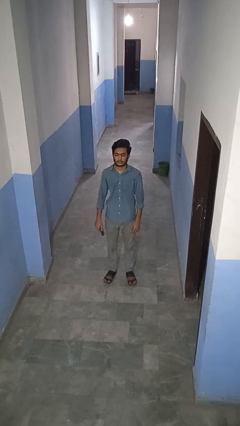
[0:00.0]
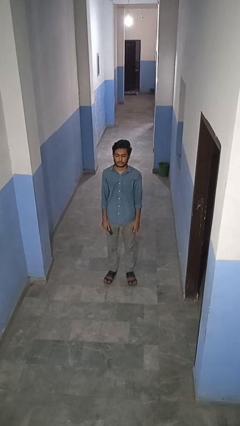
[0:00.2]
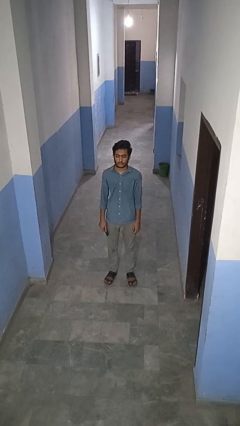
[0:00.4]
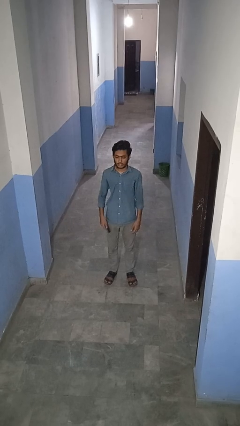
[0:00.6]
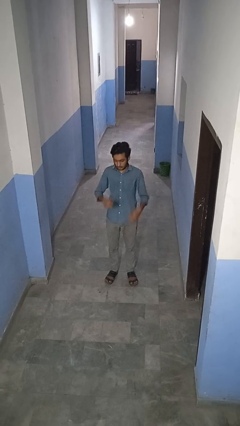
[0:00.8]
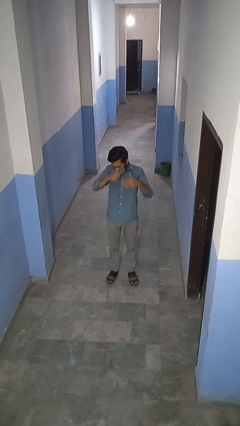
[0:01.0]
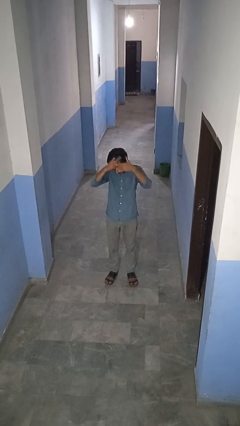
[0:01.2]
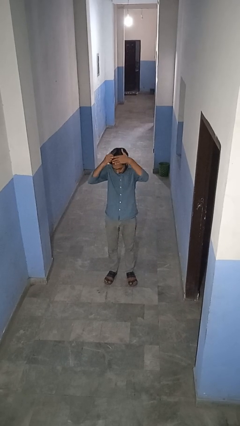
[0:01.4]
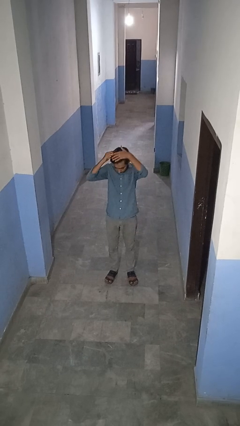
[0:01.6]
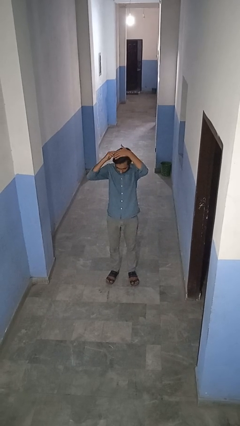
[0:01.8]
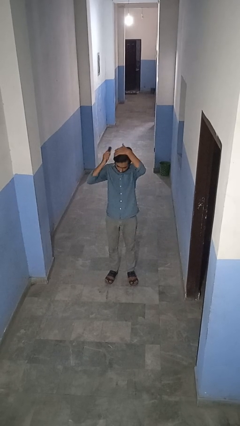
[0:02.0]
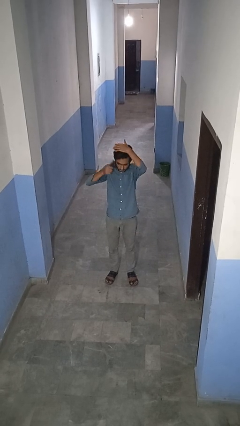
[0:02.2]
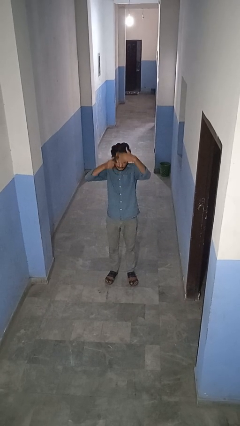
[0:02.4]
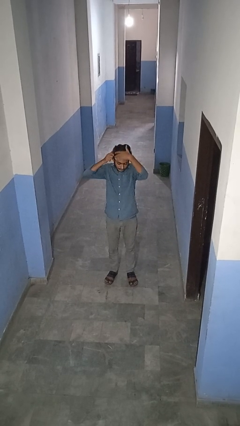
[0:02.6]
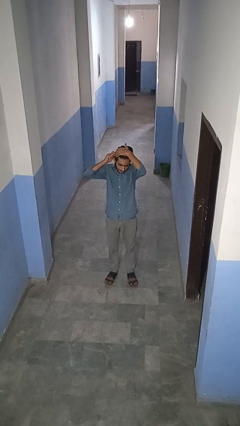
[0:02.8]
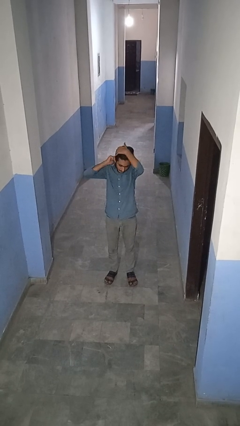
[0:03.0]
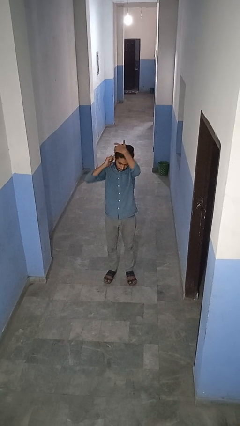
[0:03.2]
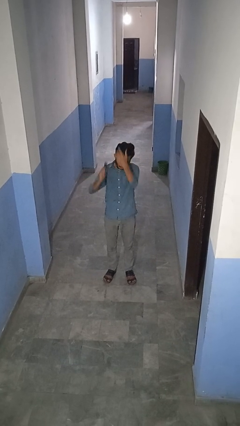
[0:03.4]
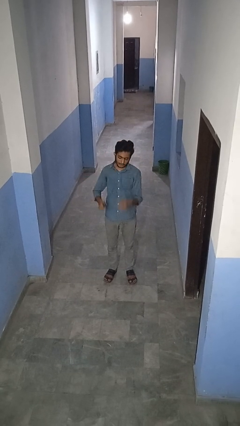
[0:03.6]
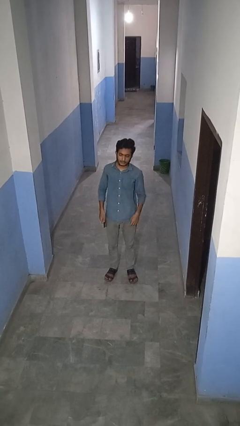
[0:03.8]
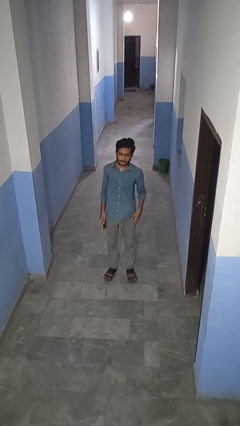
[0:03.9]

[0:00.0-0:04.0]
person brushes hair

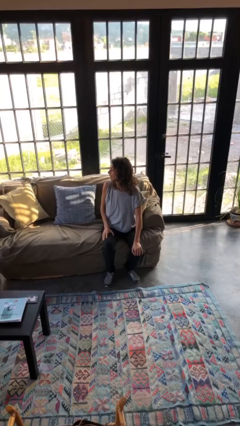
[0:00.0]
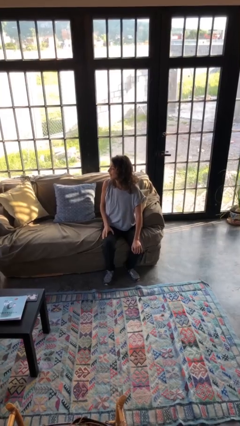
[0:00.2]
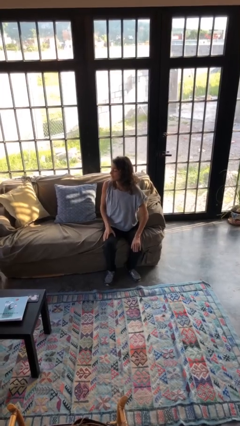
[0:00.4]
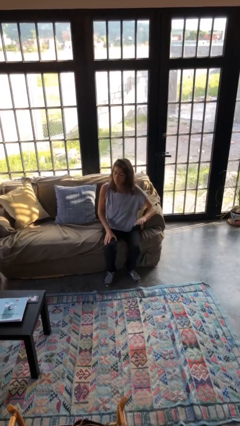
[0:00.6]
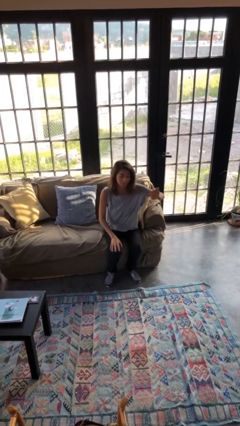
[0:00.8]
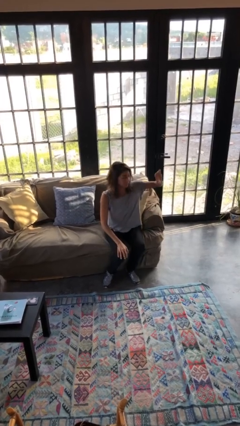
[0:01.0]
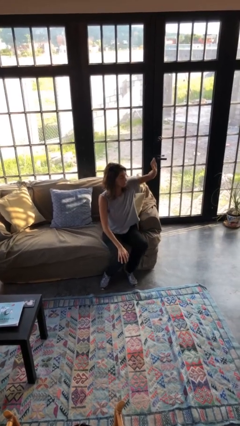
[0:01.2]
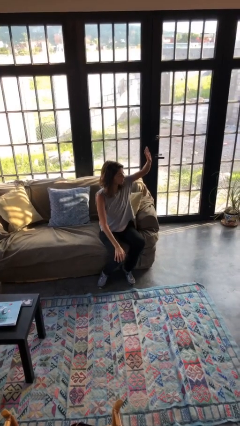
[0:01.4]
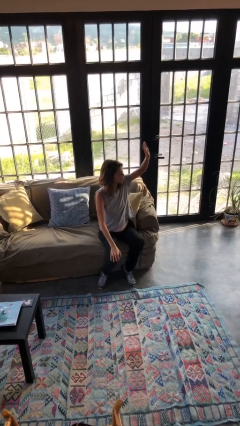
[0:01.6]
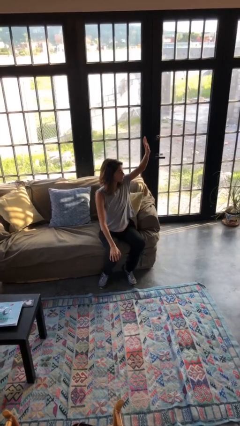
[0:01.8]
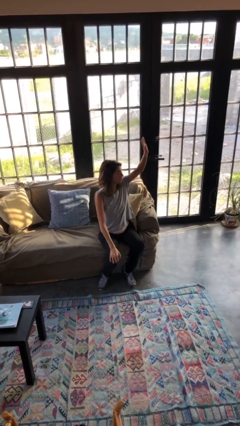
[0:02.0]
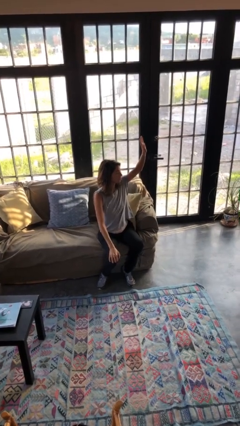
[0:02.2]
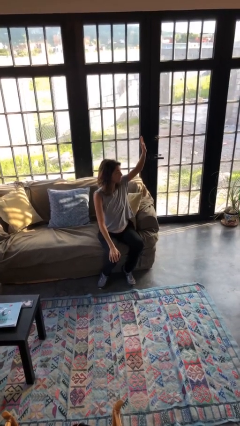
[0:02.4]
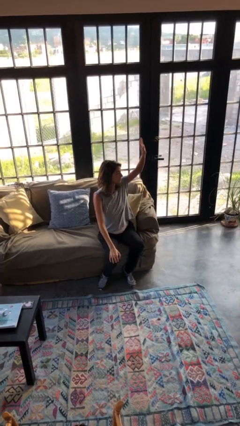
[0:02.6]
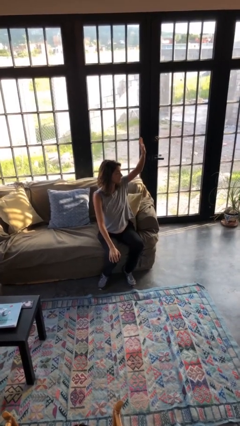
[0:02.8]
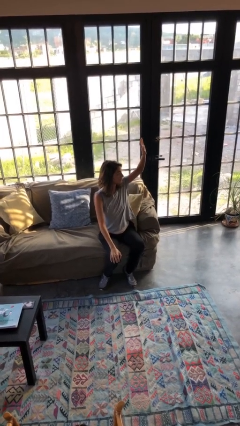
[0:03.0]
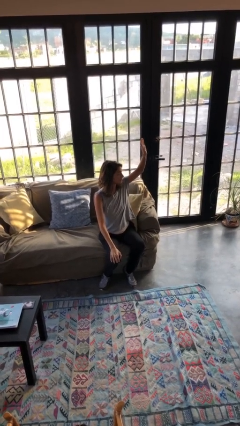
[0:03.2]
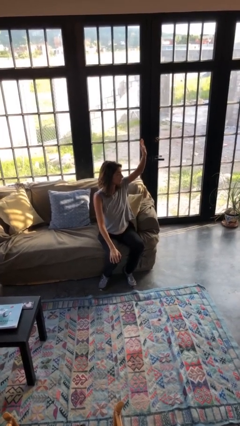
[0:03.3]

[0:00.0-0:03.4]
person gestures raise hand

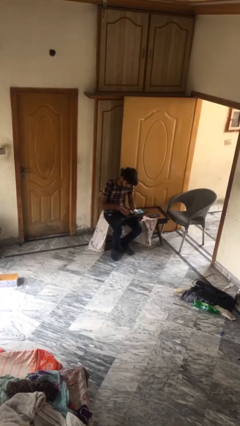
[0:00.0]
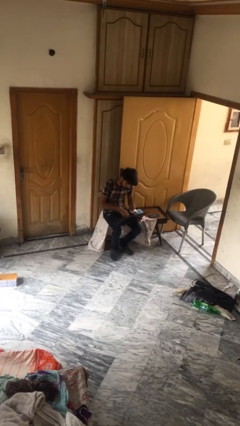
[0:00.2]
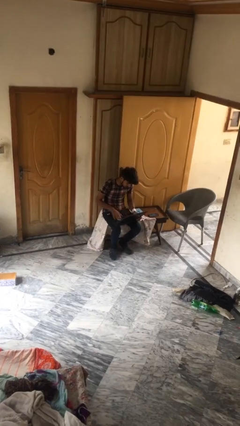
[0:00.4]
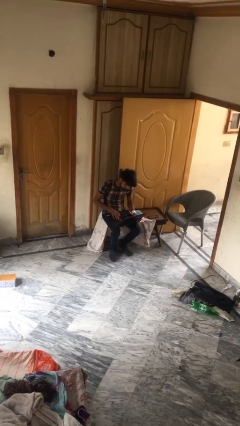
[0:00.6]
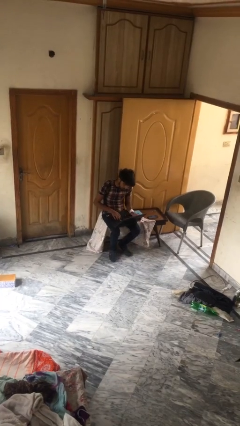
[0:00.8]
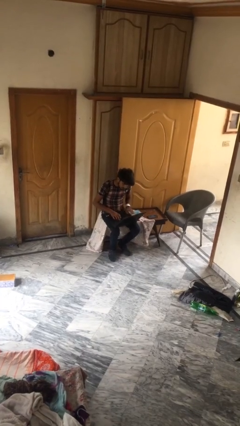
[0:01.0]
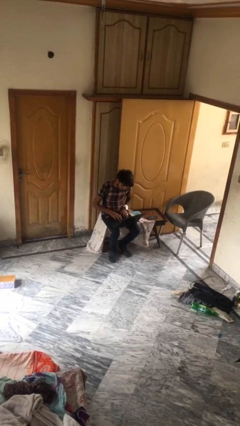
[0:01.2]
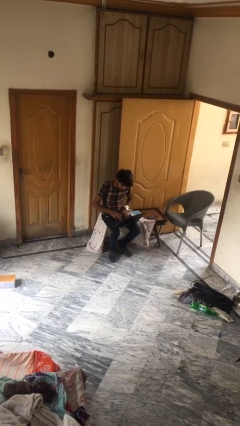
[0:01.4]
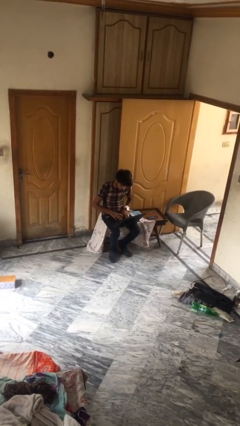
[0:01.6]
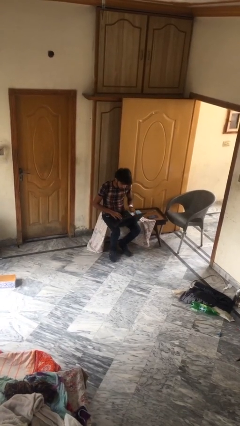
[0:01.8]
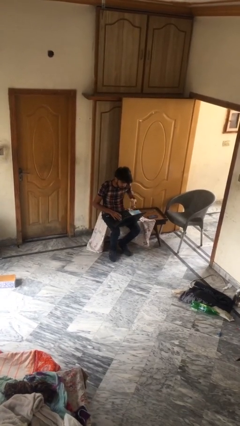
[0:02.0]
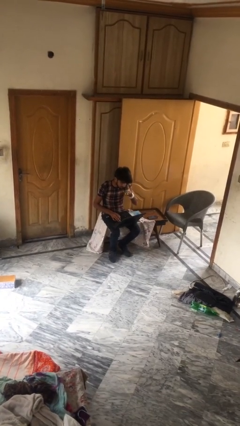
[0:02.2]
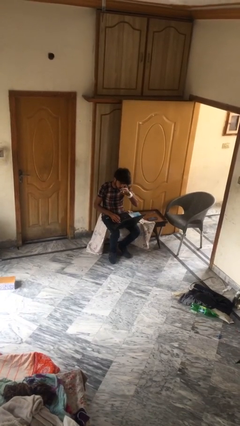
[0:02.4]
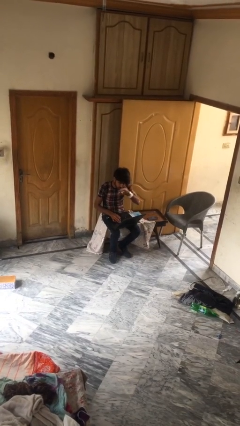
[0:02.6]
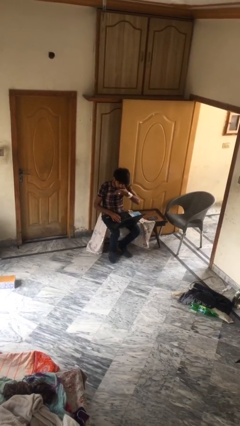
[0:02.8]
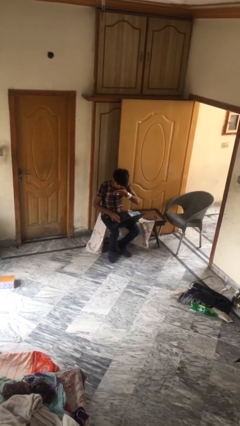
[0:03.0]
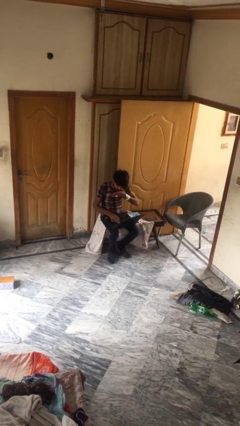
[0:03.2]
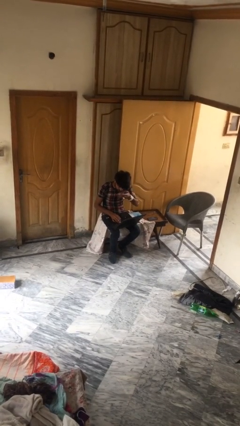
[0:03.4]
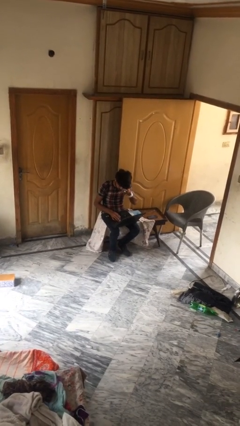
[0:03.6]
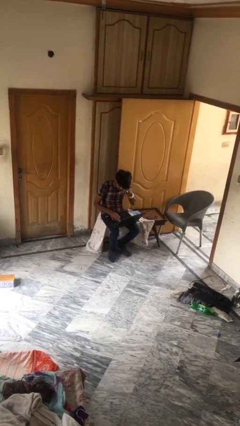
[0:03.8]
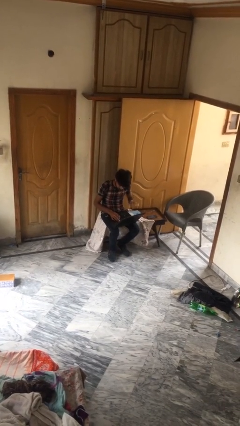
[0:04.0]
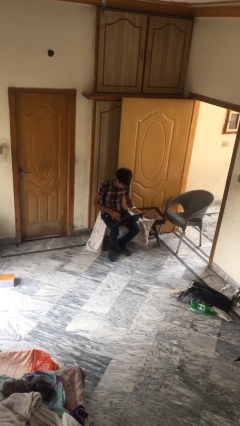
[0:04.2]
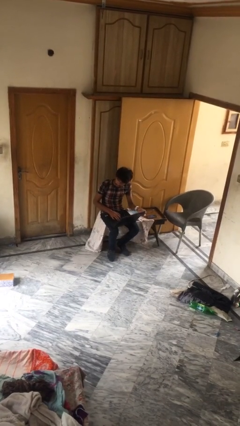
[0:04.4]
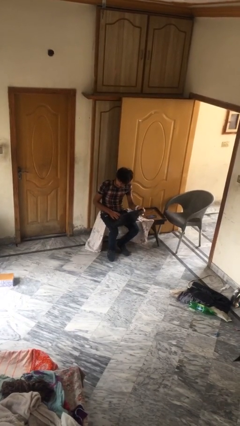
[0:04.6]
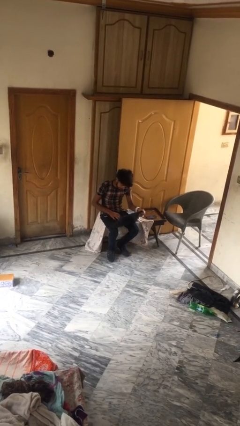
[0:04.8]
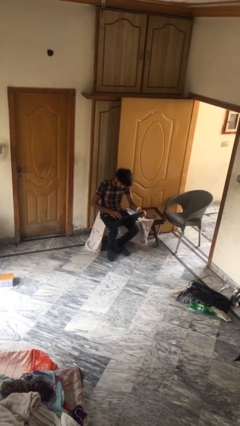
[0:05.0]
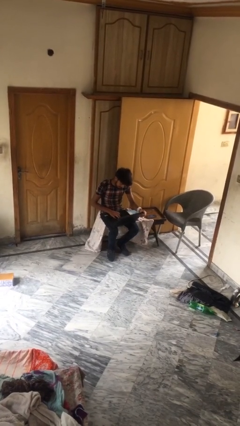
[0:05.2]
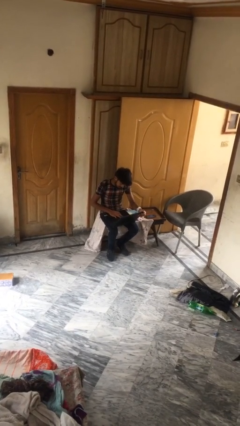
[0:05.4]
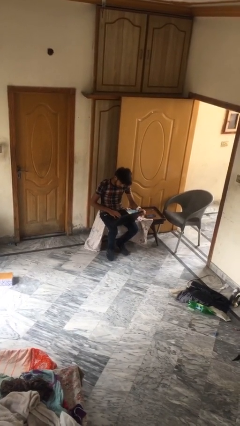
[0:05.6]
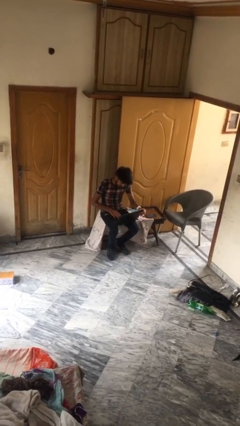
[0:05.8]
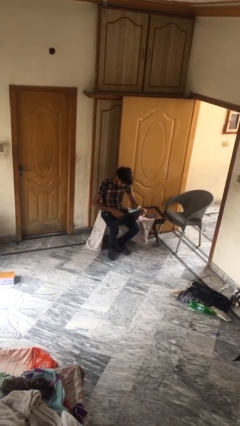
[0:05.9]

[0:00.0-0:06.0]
person interacts with laptop

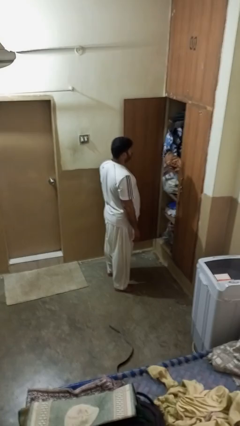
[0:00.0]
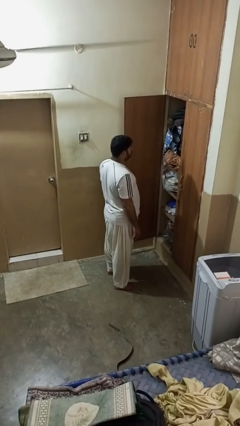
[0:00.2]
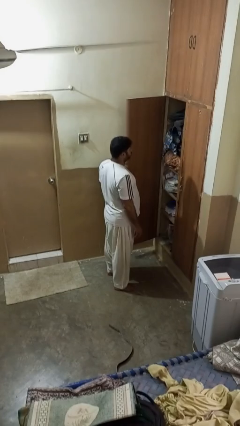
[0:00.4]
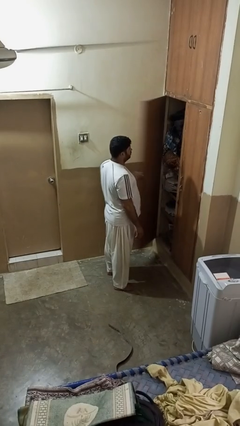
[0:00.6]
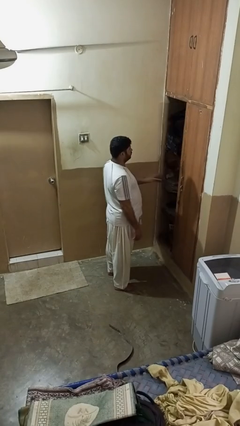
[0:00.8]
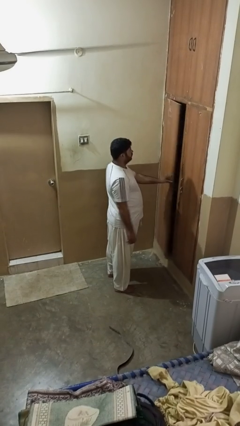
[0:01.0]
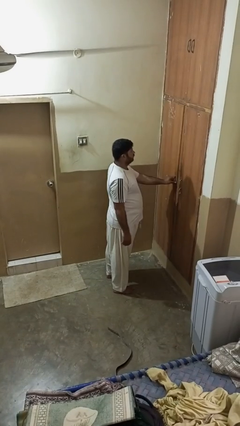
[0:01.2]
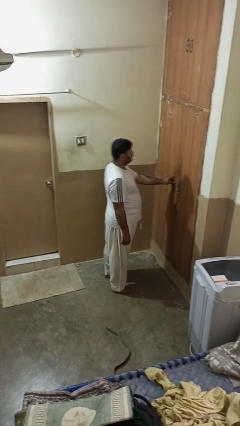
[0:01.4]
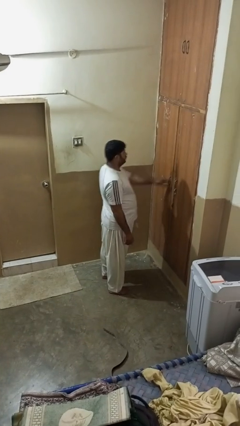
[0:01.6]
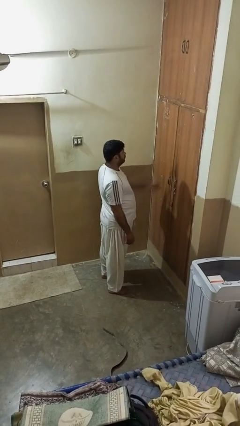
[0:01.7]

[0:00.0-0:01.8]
person closes closet door

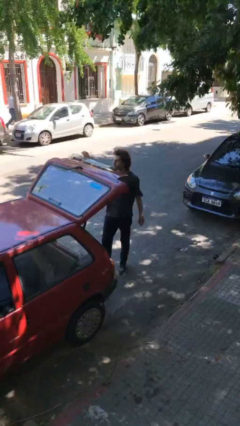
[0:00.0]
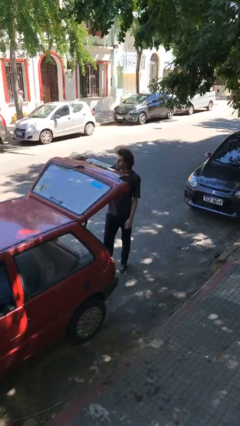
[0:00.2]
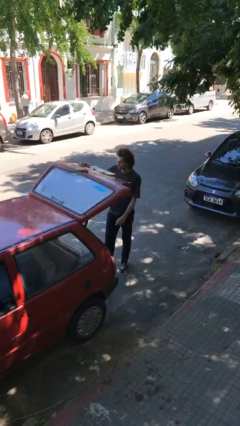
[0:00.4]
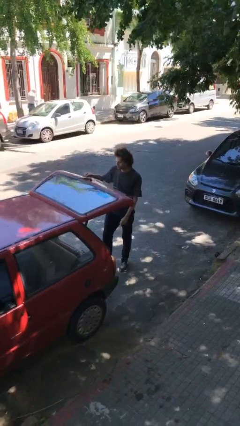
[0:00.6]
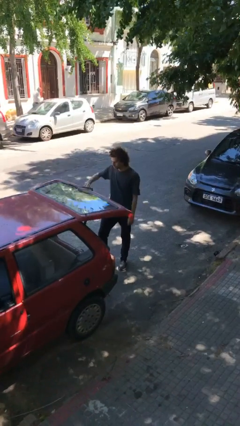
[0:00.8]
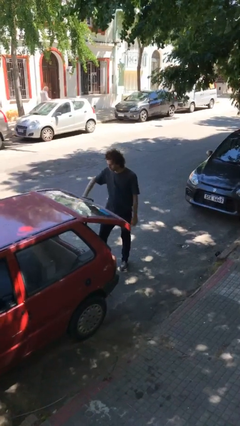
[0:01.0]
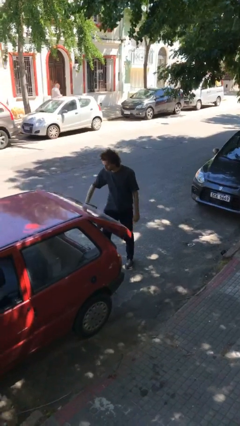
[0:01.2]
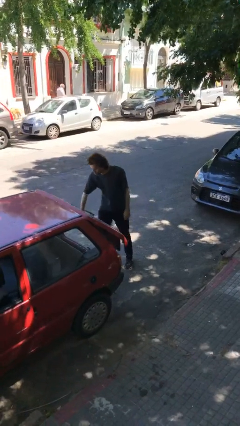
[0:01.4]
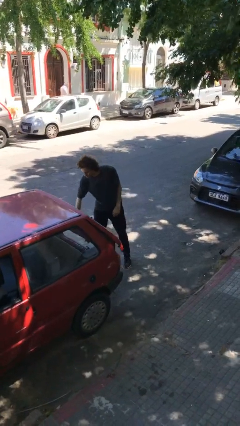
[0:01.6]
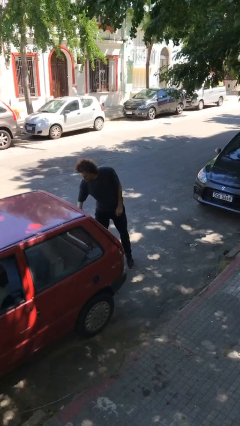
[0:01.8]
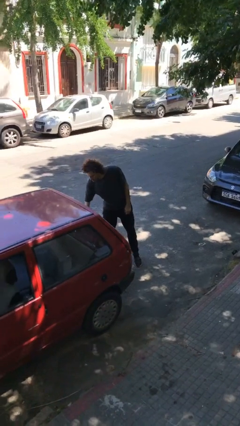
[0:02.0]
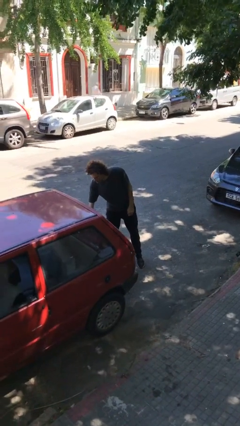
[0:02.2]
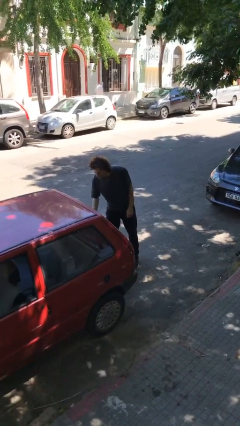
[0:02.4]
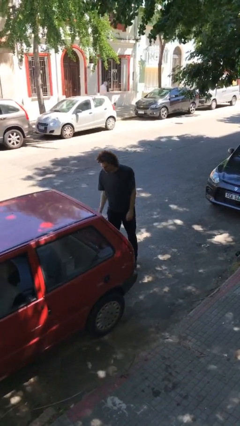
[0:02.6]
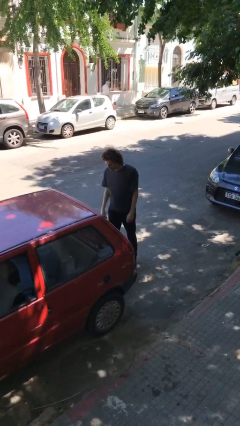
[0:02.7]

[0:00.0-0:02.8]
person closes car trunk
